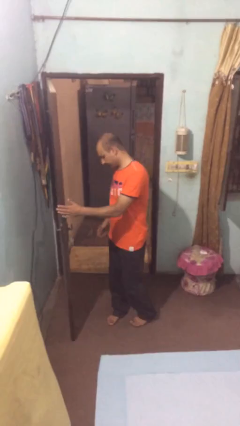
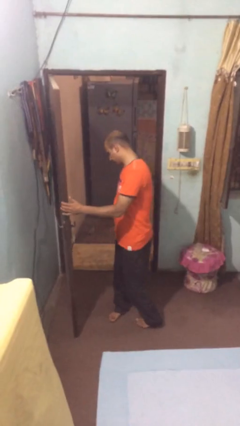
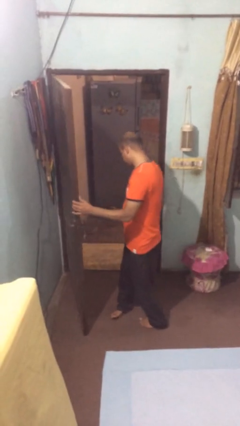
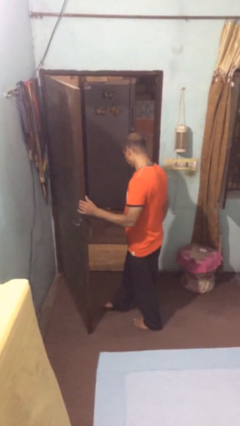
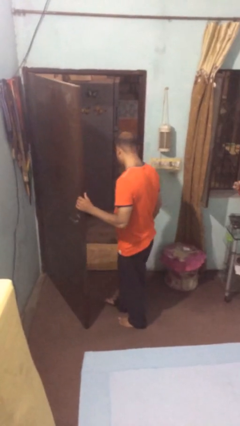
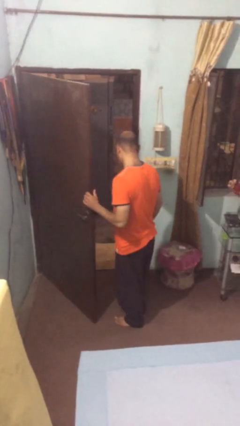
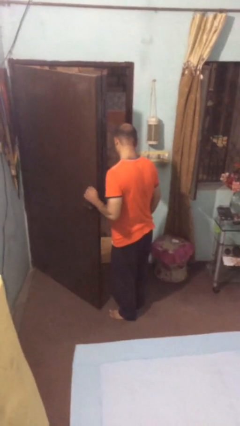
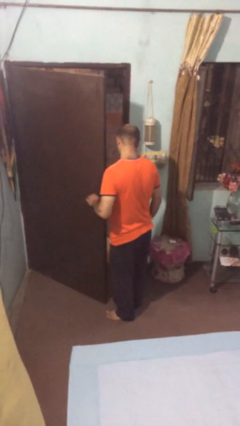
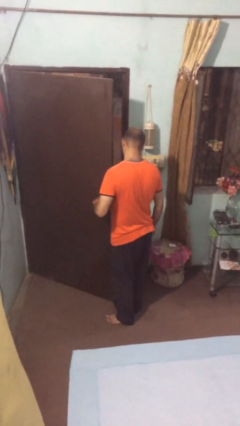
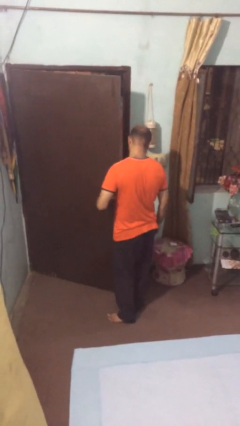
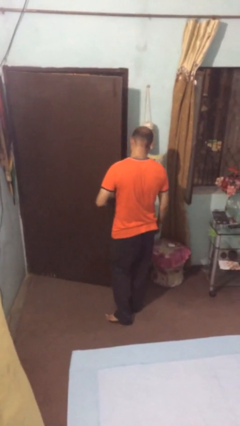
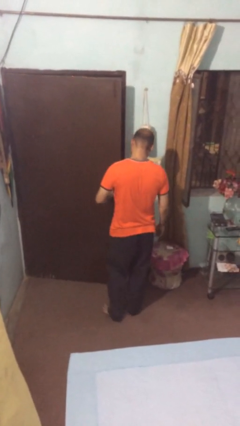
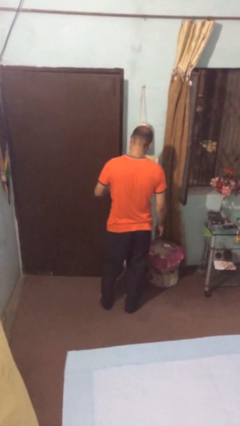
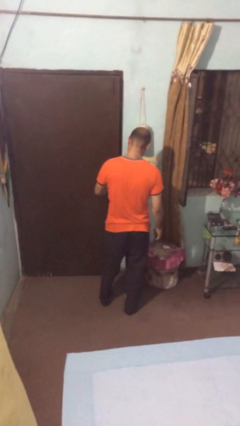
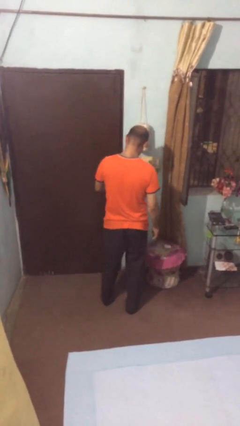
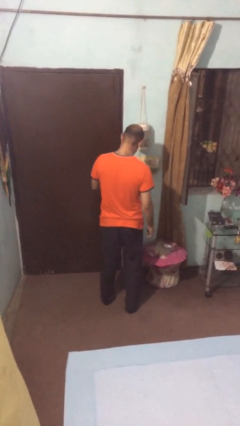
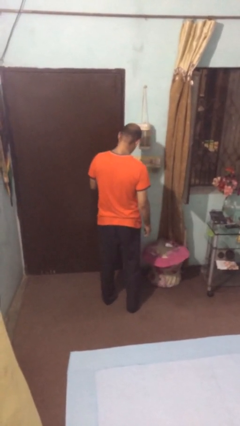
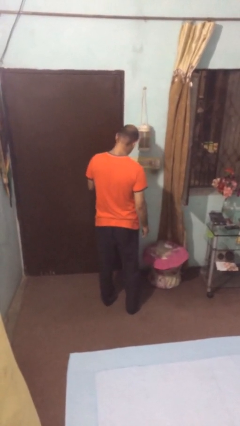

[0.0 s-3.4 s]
person closes facility door

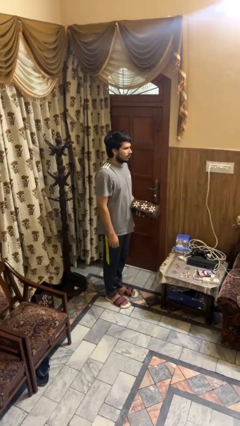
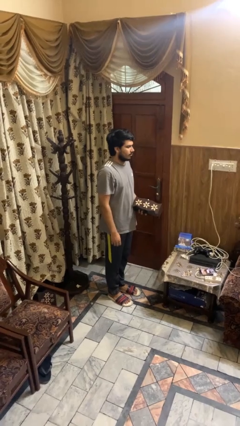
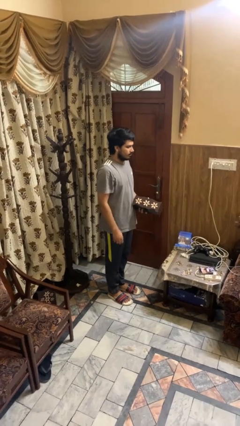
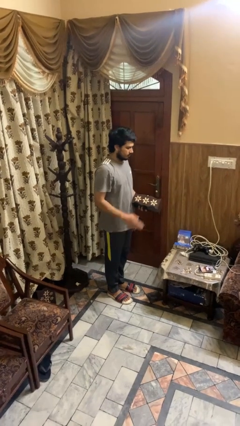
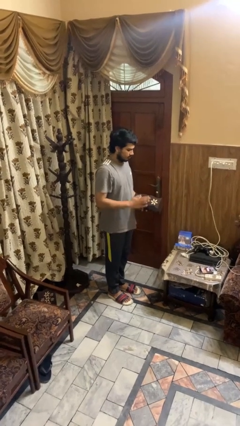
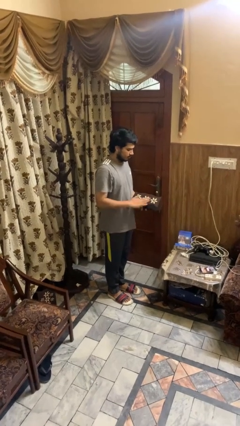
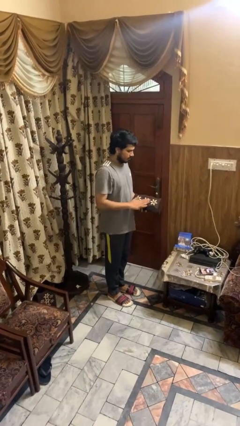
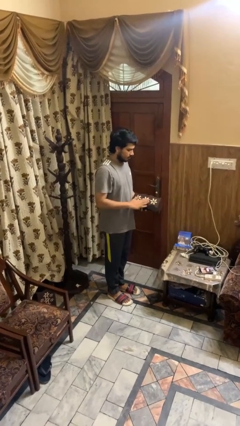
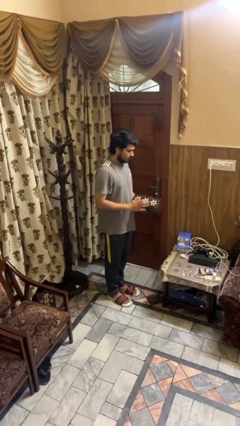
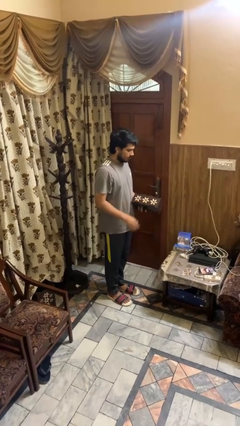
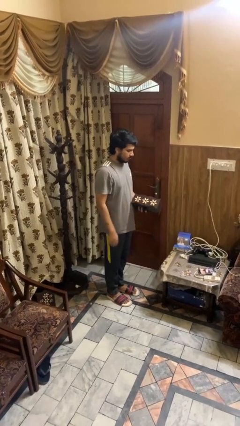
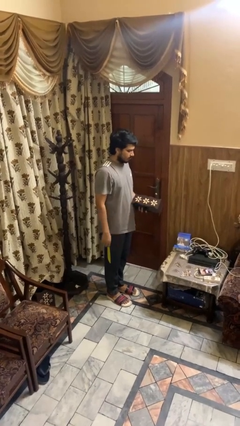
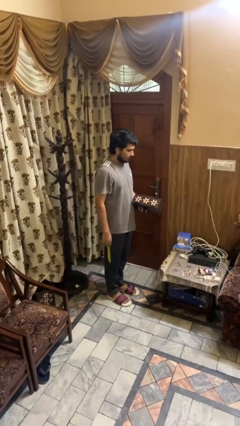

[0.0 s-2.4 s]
person taps object with finger

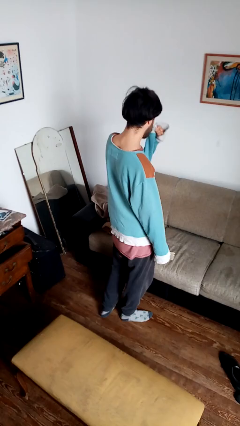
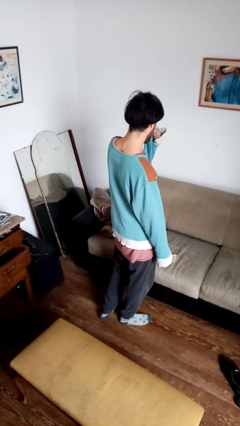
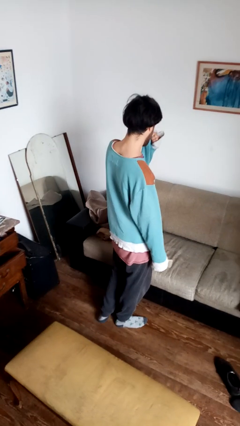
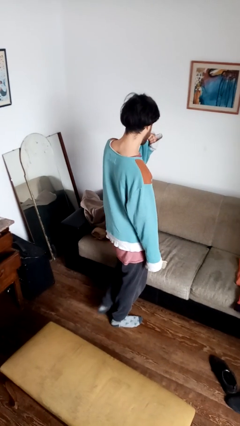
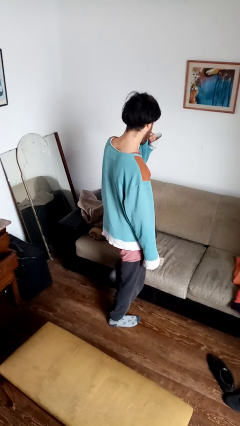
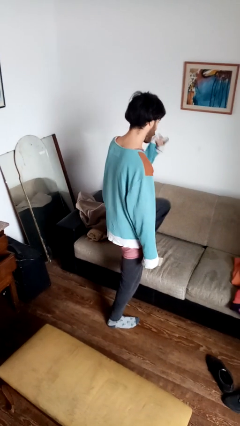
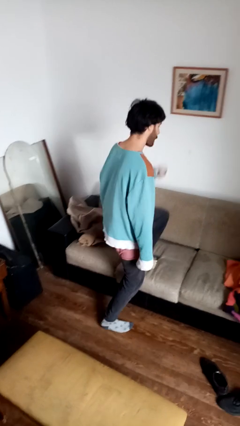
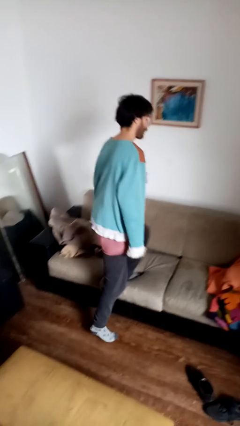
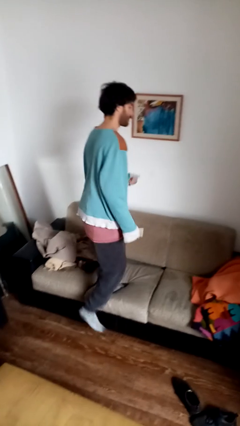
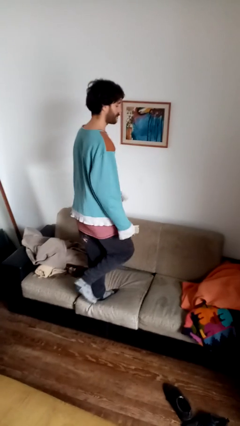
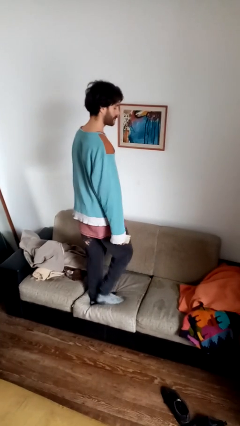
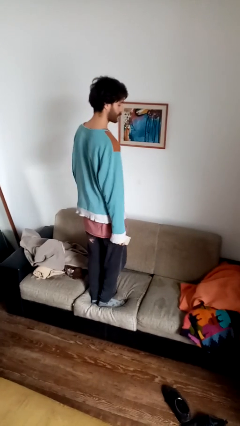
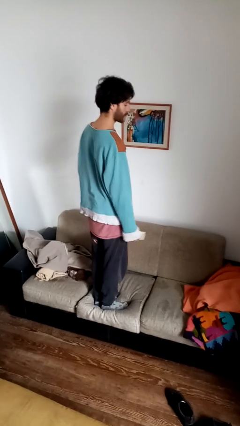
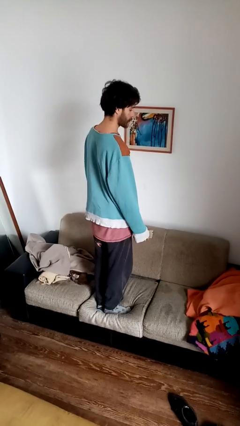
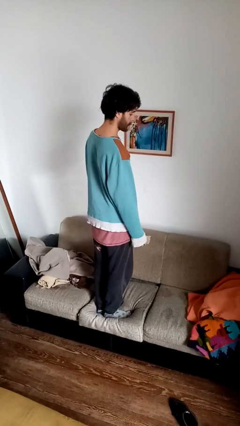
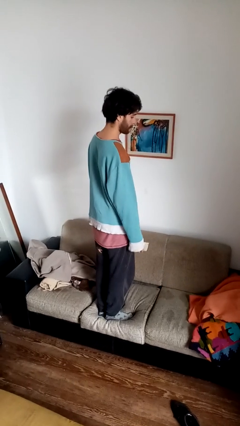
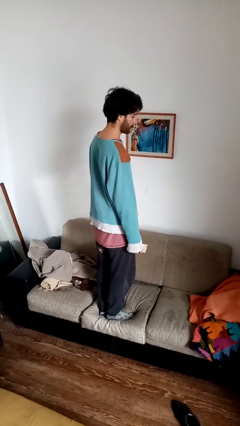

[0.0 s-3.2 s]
person climbs on couch

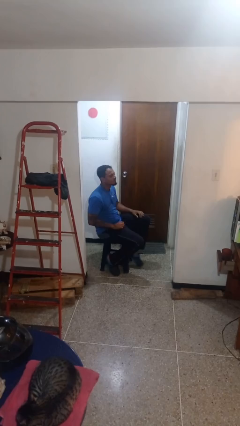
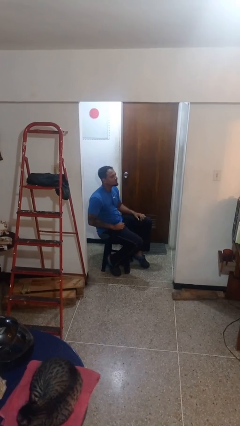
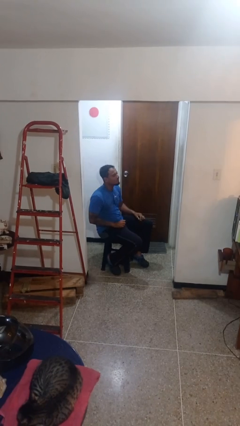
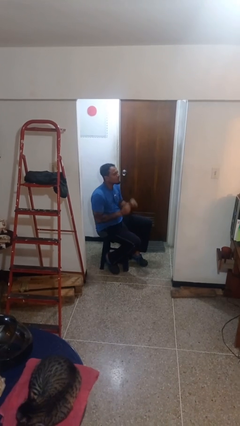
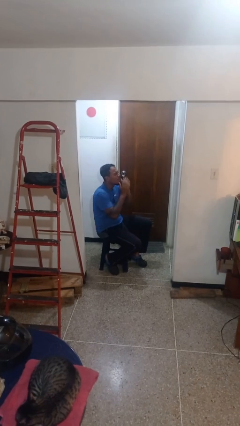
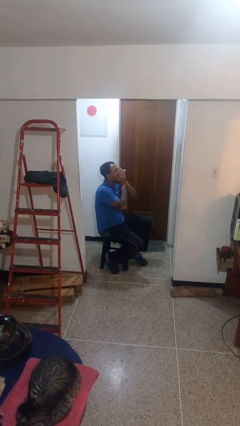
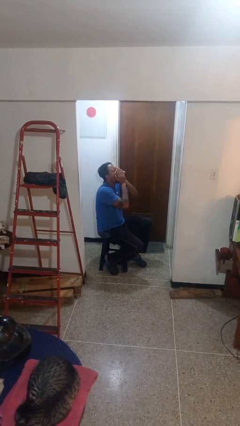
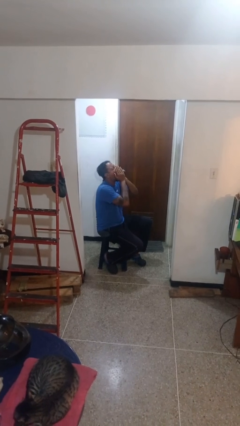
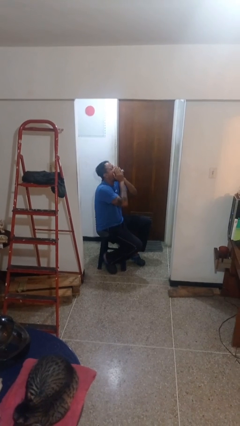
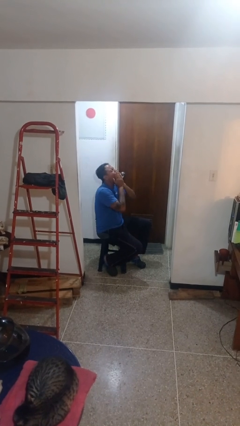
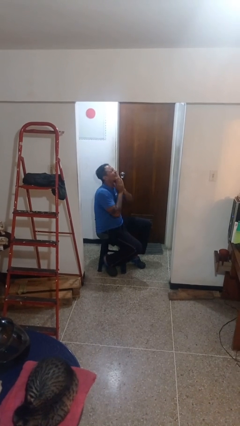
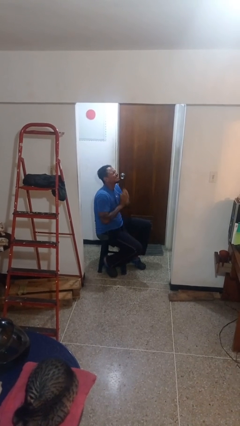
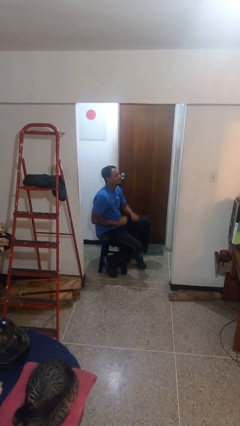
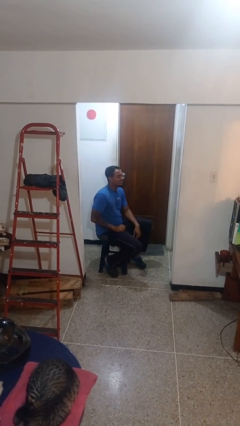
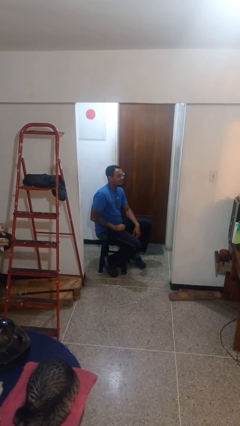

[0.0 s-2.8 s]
person yawns

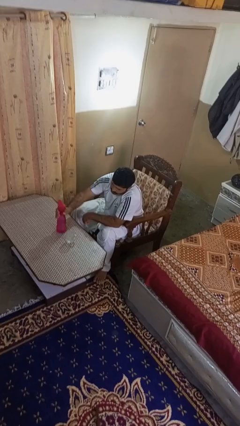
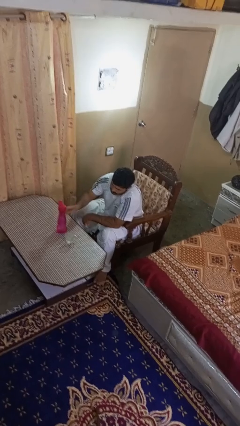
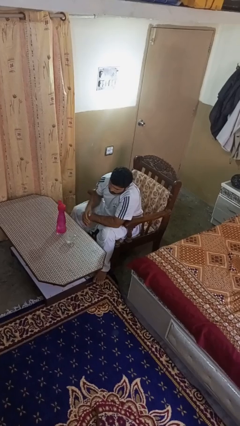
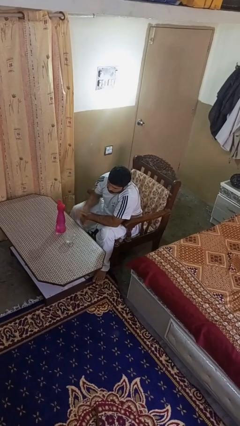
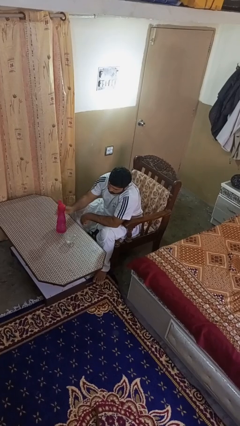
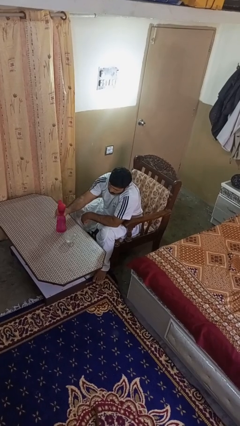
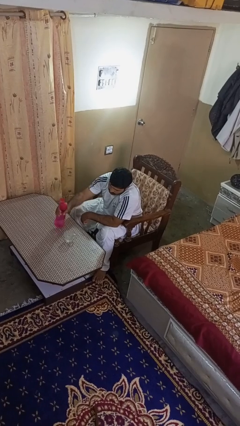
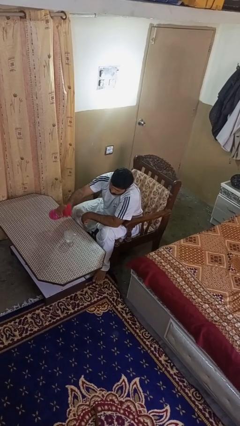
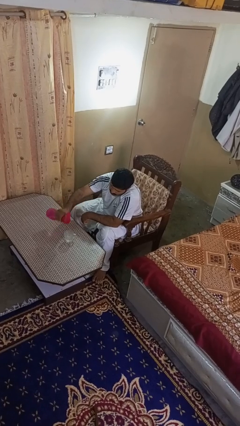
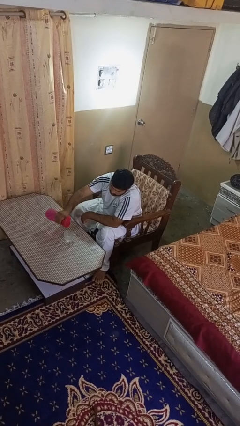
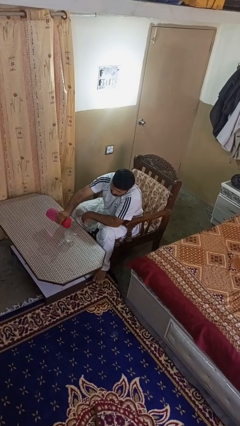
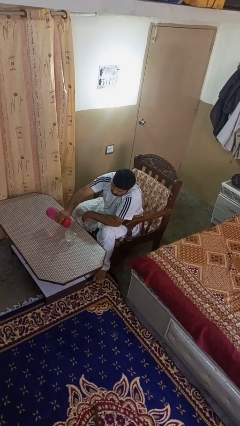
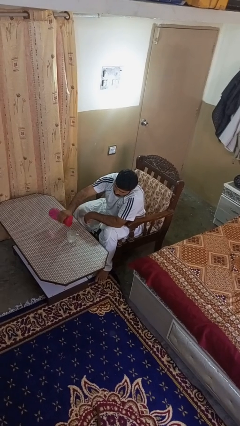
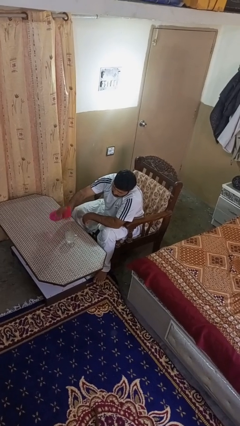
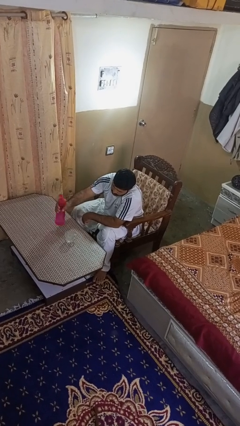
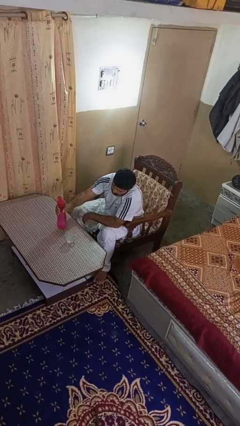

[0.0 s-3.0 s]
person pours liquid into cup

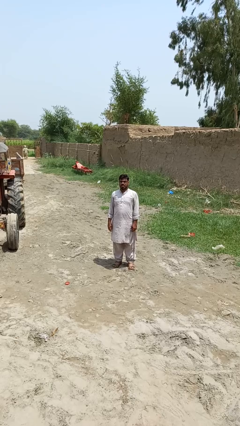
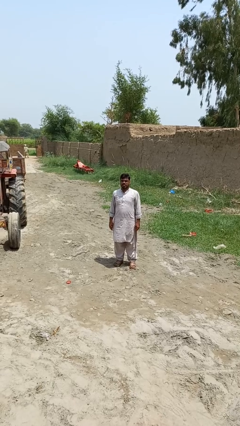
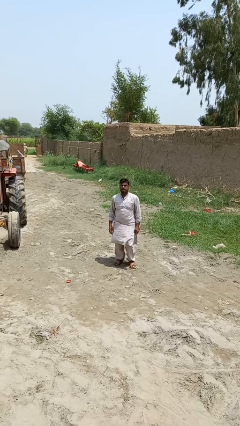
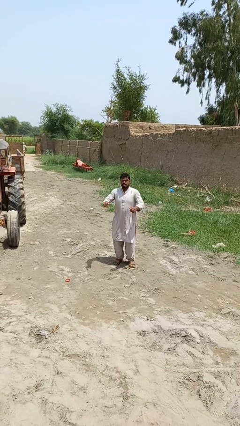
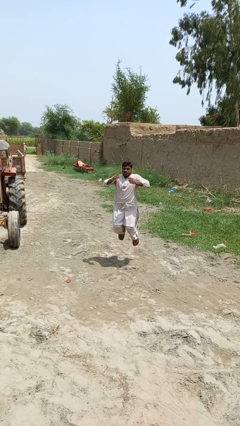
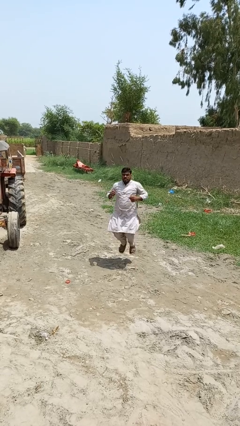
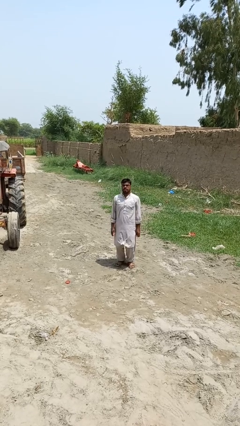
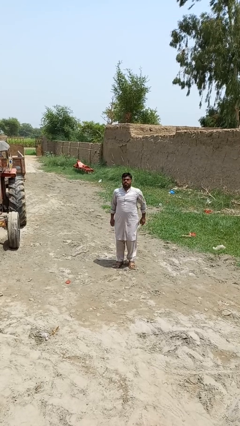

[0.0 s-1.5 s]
person jumps

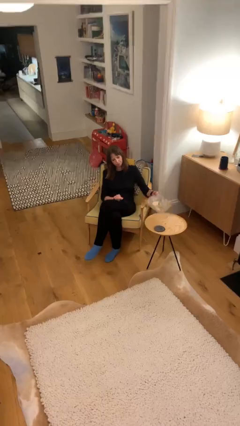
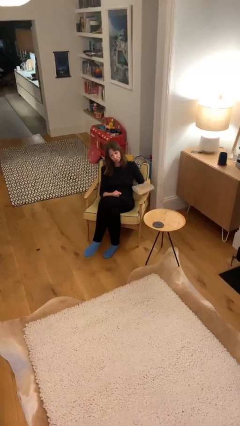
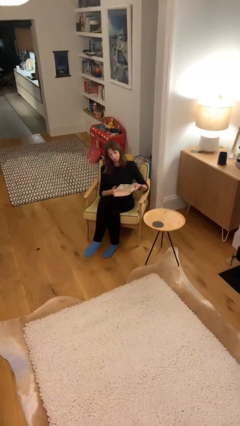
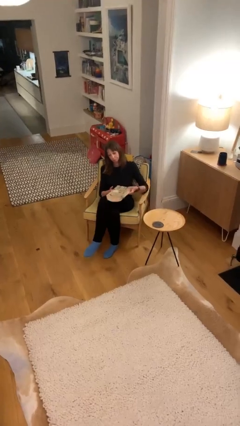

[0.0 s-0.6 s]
person picks up object from table
